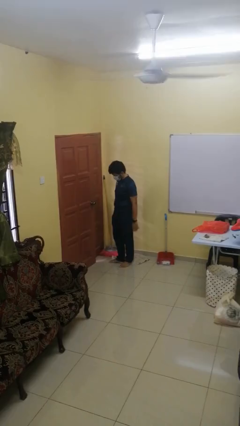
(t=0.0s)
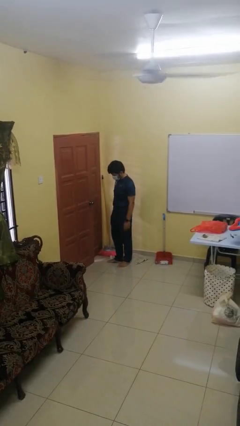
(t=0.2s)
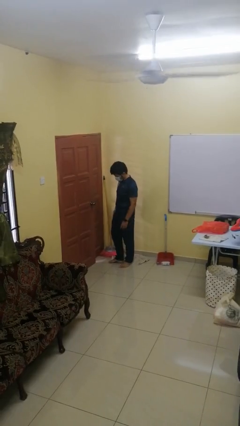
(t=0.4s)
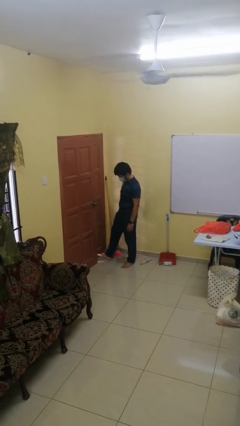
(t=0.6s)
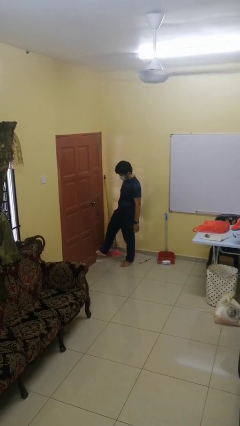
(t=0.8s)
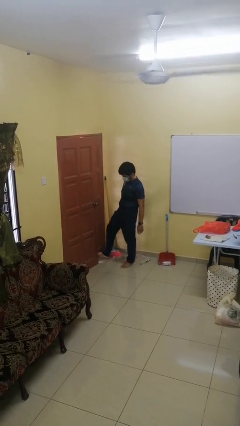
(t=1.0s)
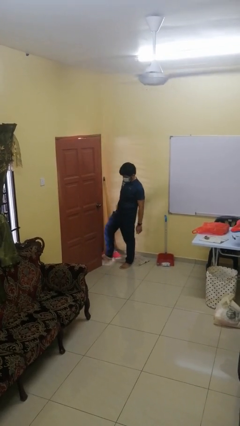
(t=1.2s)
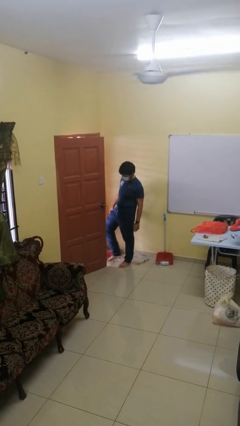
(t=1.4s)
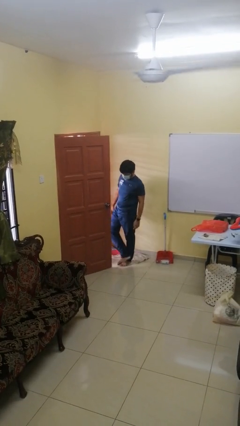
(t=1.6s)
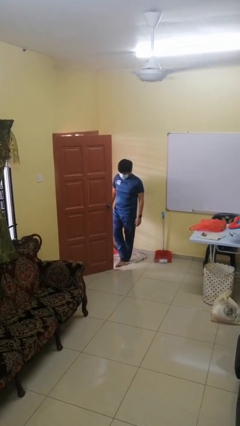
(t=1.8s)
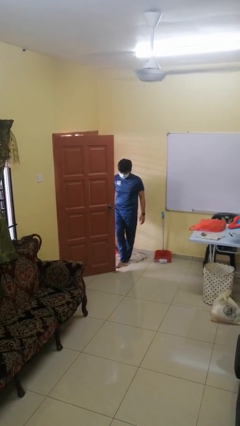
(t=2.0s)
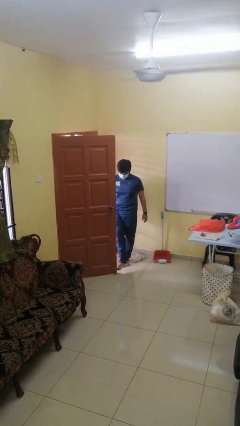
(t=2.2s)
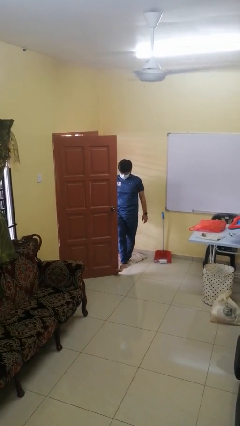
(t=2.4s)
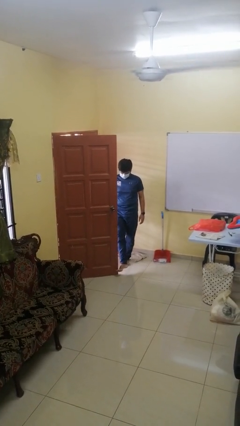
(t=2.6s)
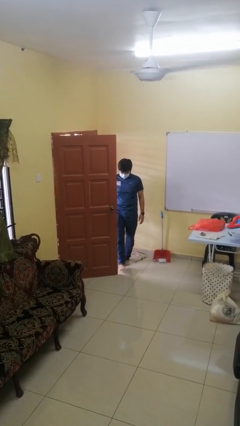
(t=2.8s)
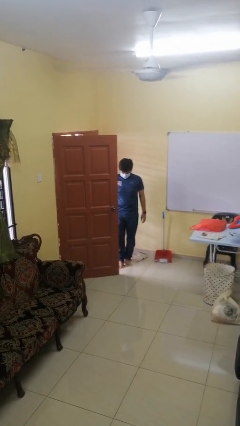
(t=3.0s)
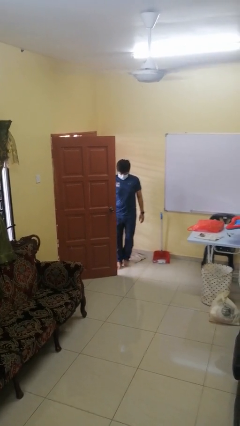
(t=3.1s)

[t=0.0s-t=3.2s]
person opens facility door

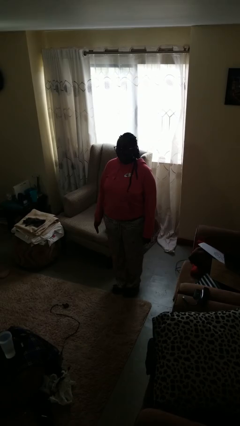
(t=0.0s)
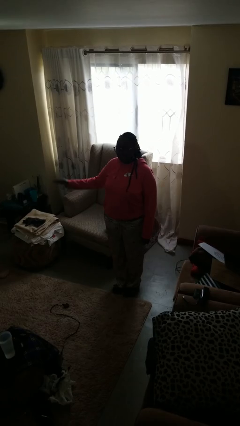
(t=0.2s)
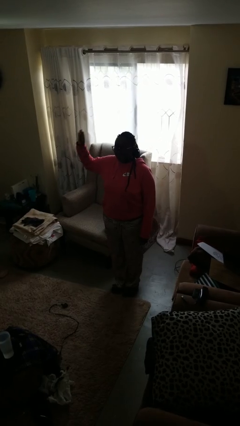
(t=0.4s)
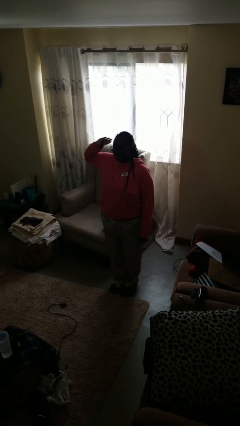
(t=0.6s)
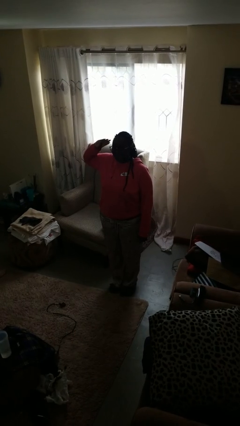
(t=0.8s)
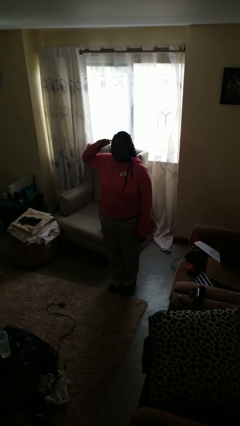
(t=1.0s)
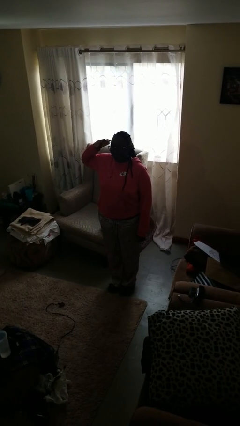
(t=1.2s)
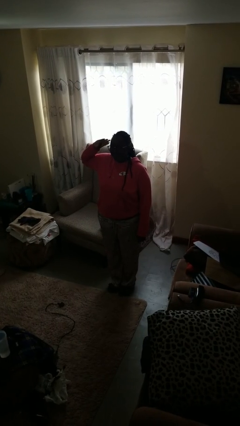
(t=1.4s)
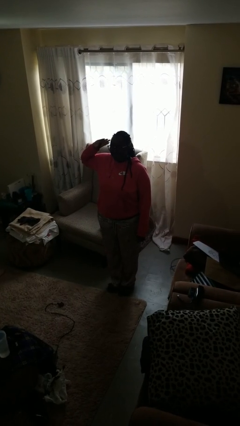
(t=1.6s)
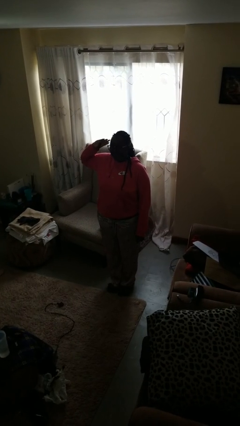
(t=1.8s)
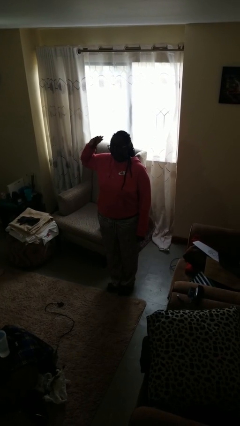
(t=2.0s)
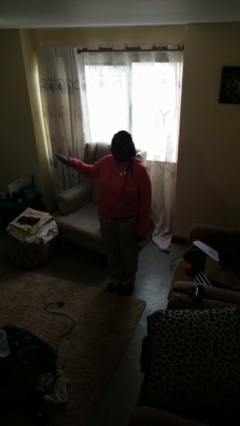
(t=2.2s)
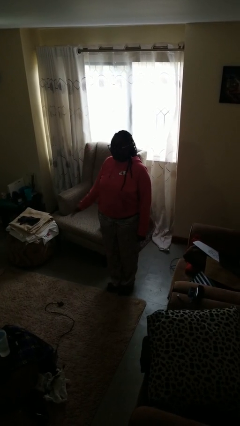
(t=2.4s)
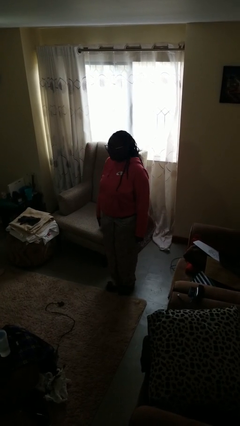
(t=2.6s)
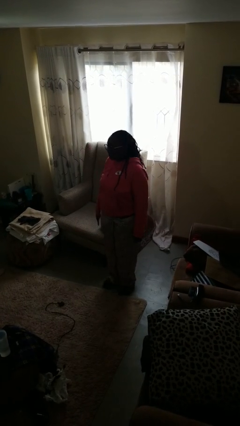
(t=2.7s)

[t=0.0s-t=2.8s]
person salutes

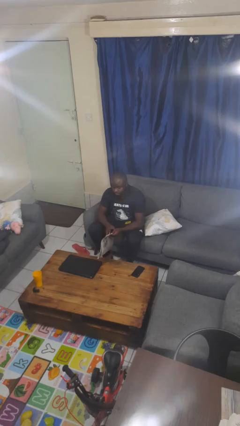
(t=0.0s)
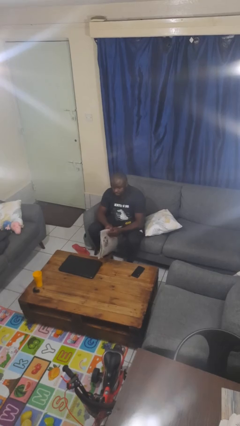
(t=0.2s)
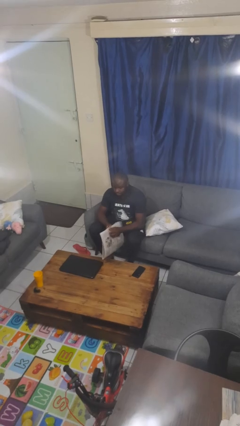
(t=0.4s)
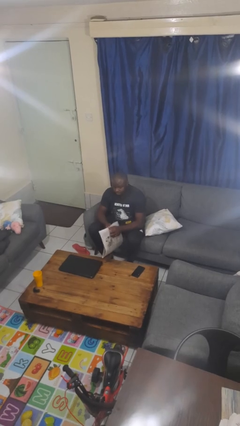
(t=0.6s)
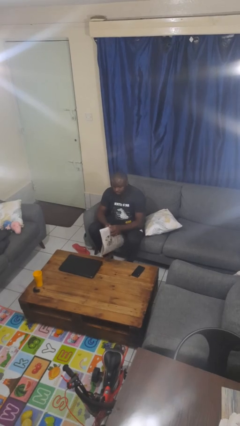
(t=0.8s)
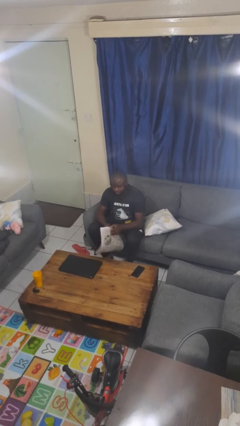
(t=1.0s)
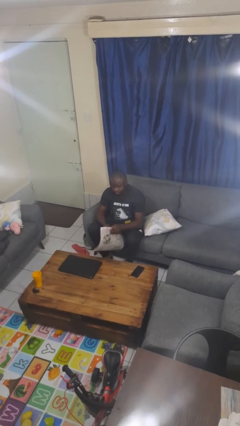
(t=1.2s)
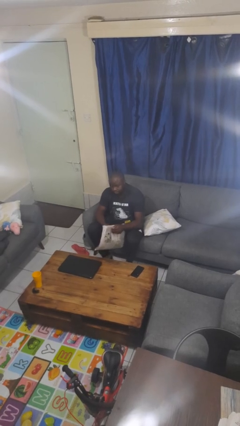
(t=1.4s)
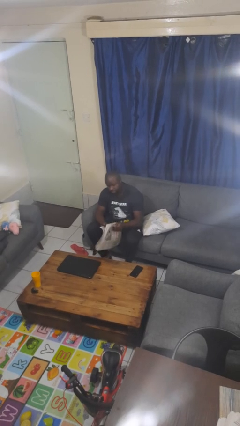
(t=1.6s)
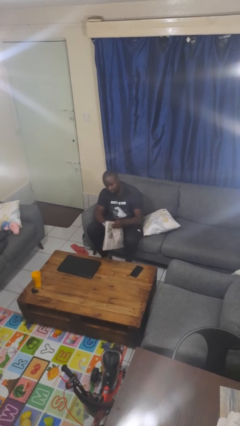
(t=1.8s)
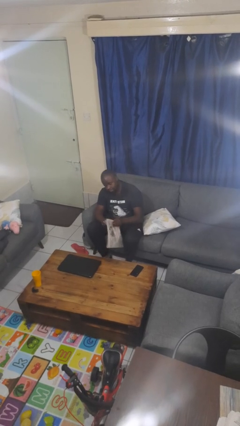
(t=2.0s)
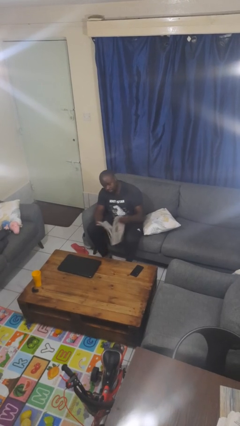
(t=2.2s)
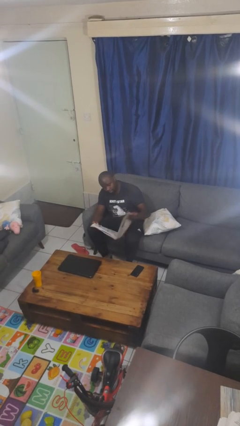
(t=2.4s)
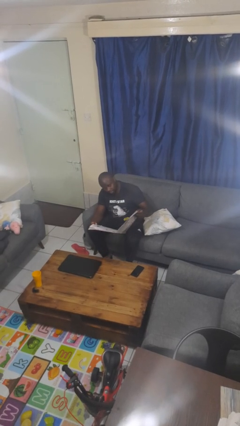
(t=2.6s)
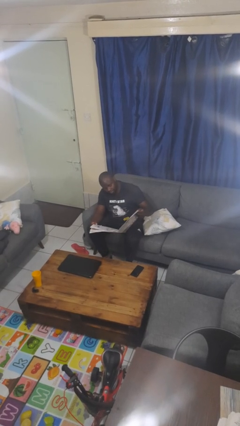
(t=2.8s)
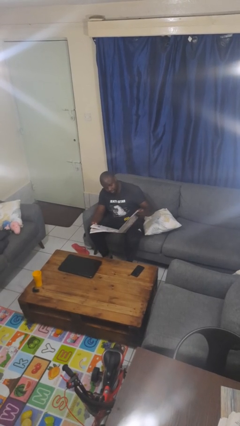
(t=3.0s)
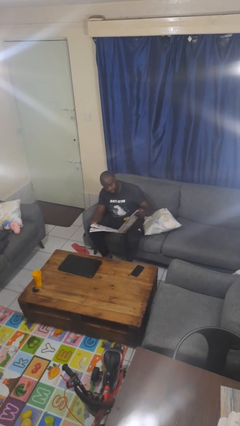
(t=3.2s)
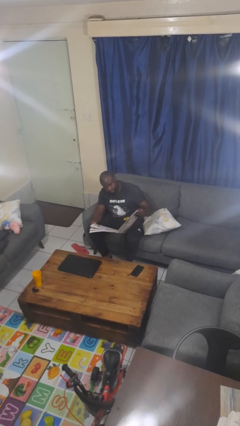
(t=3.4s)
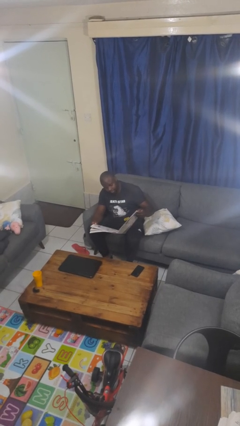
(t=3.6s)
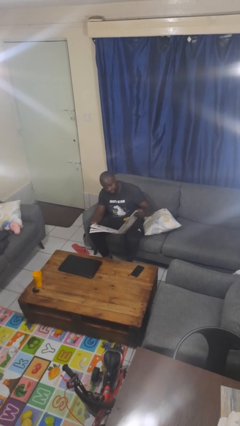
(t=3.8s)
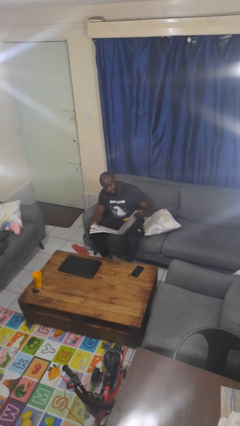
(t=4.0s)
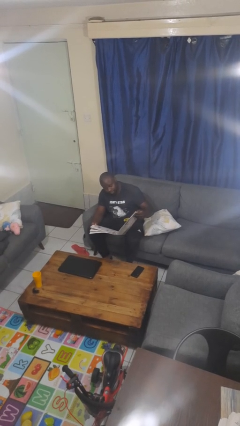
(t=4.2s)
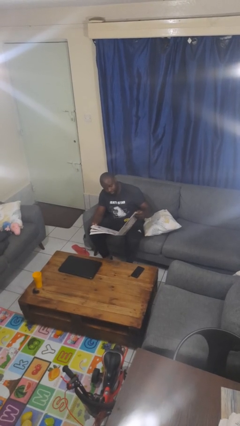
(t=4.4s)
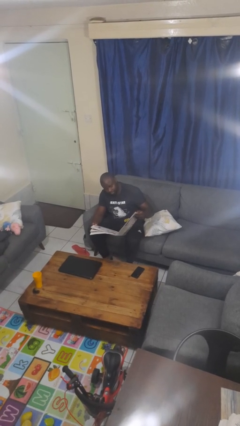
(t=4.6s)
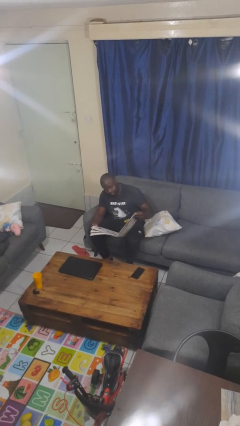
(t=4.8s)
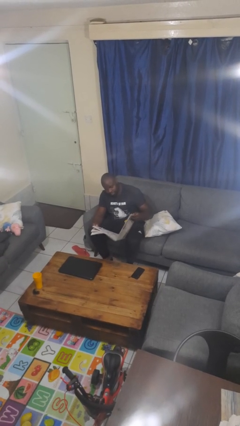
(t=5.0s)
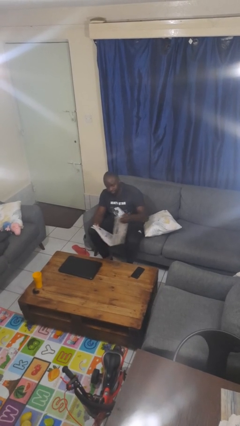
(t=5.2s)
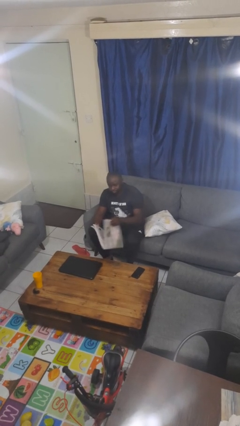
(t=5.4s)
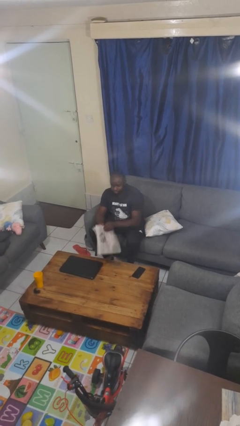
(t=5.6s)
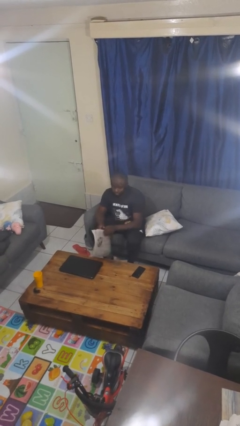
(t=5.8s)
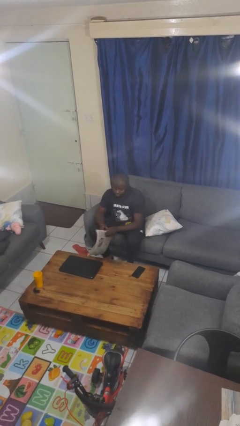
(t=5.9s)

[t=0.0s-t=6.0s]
person reads newspaper

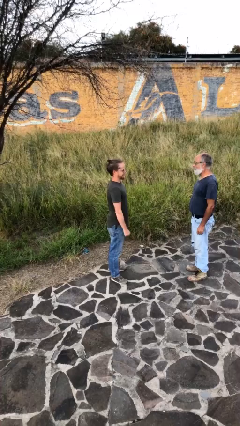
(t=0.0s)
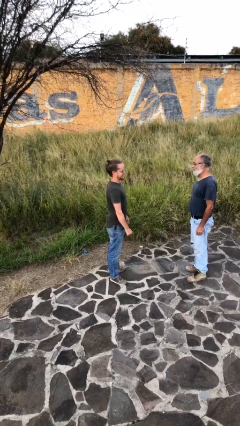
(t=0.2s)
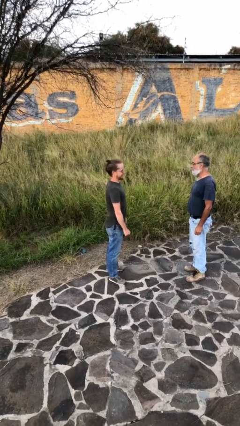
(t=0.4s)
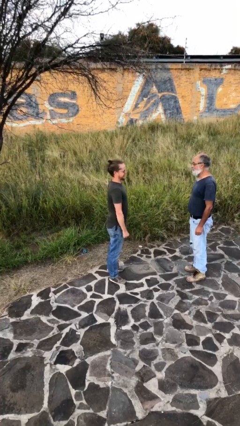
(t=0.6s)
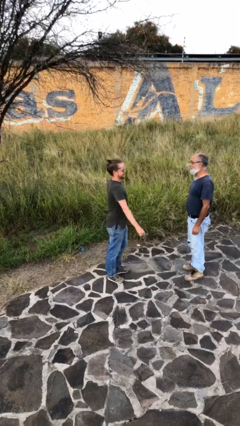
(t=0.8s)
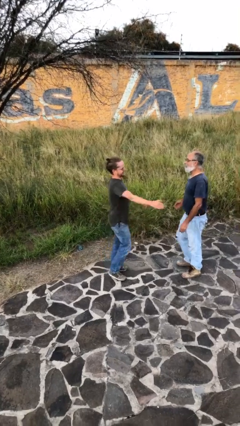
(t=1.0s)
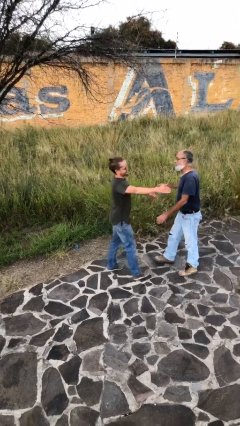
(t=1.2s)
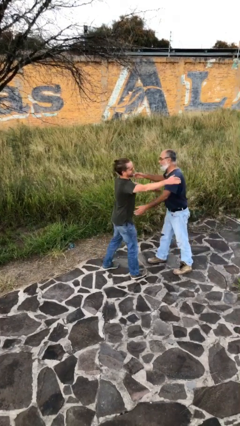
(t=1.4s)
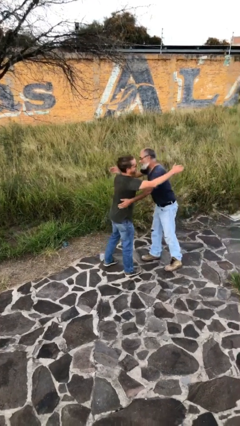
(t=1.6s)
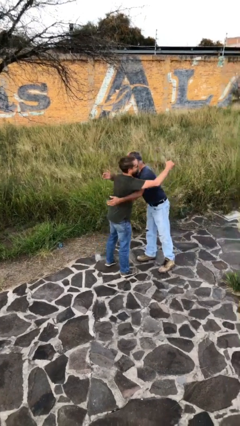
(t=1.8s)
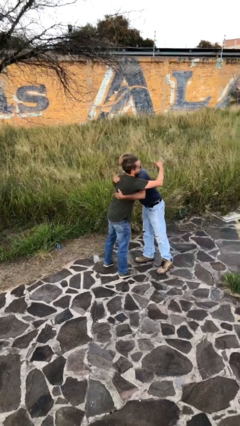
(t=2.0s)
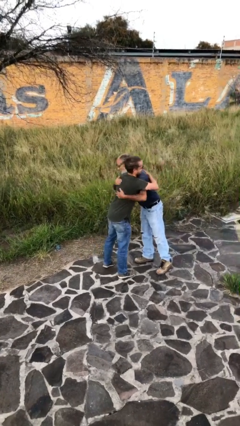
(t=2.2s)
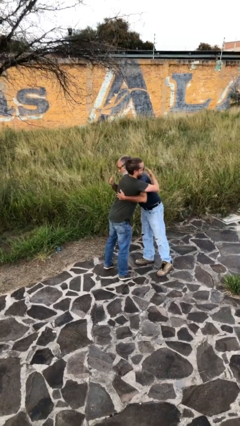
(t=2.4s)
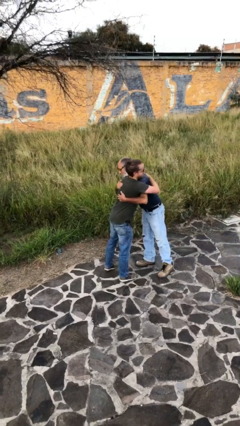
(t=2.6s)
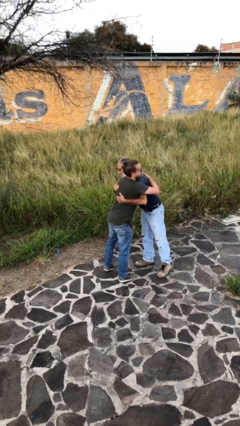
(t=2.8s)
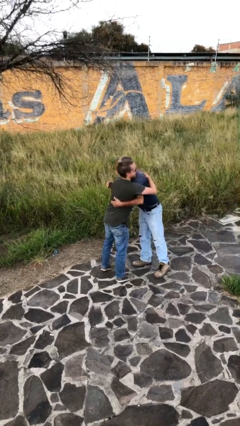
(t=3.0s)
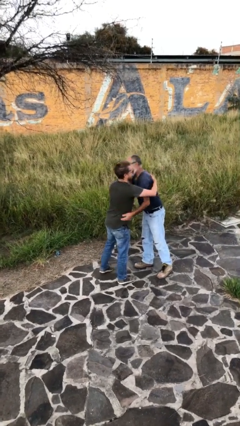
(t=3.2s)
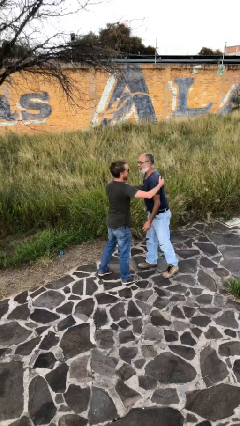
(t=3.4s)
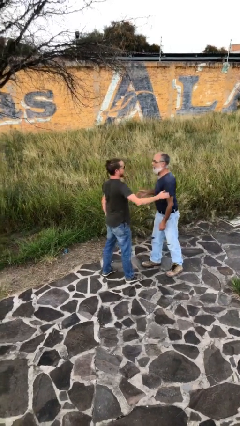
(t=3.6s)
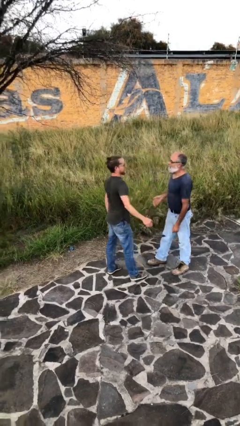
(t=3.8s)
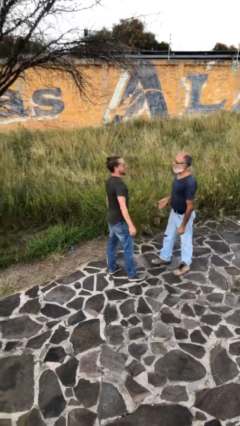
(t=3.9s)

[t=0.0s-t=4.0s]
person embraces person

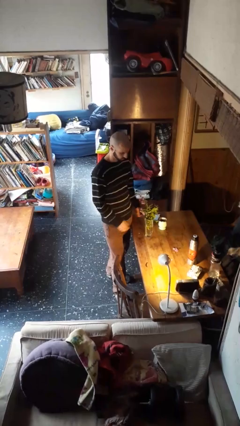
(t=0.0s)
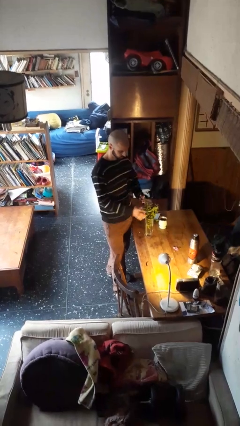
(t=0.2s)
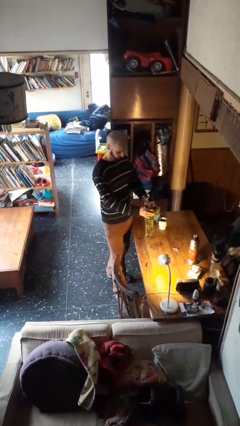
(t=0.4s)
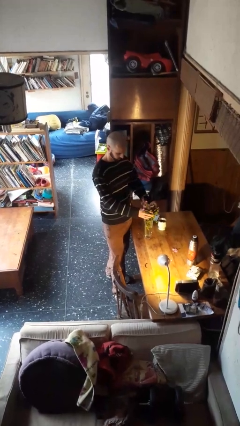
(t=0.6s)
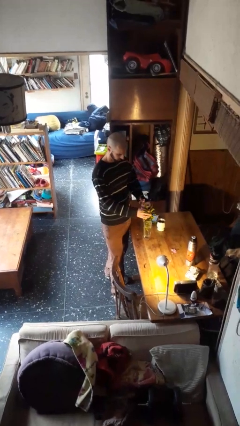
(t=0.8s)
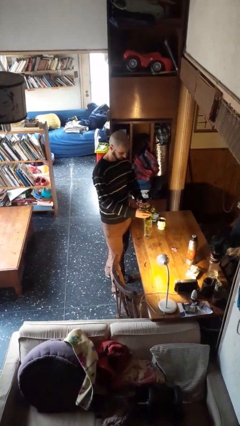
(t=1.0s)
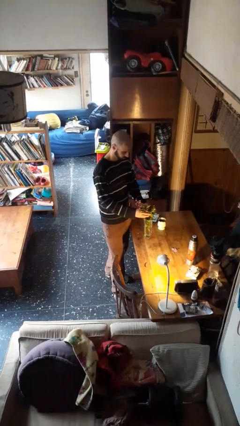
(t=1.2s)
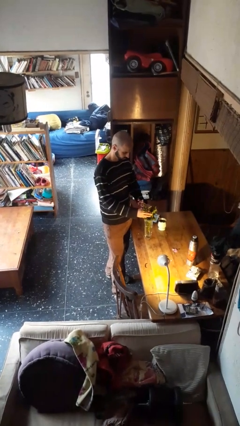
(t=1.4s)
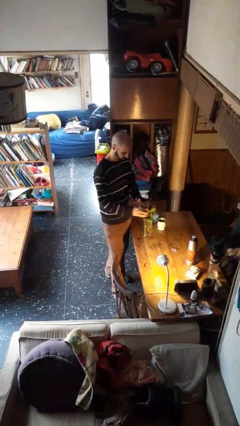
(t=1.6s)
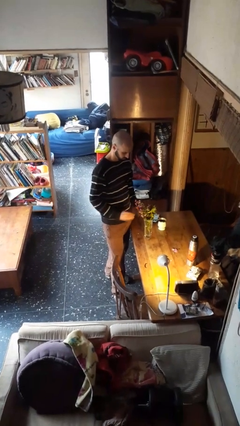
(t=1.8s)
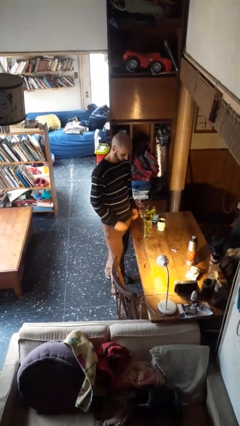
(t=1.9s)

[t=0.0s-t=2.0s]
person arranges flowers in vase
